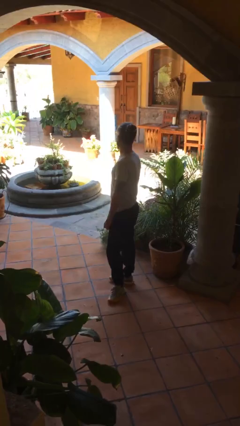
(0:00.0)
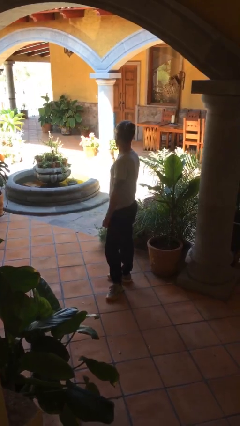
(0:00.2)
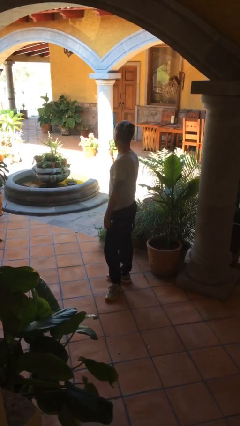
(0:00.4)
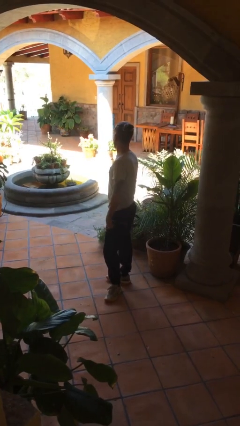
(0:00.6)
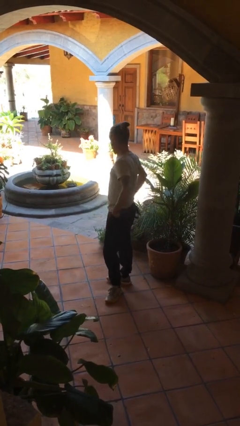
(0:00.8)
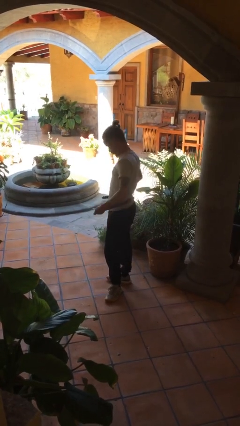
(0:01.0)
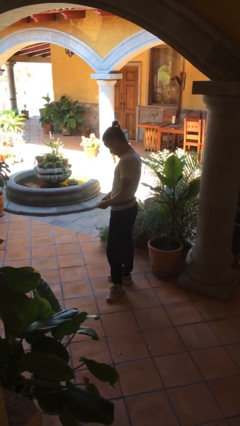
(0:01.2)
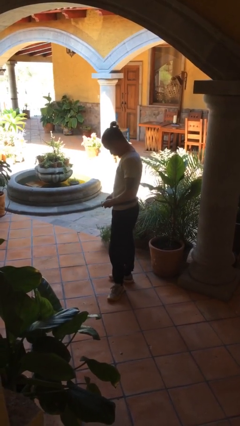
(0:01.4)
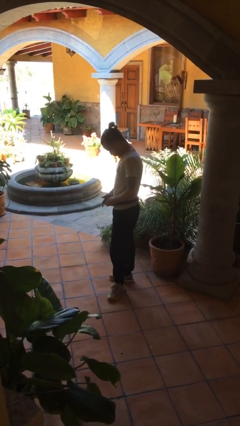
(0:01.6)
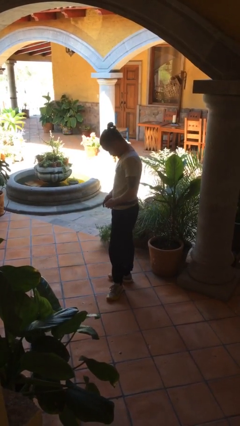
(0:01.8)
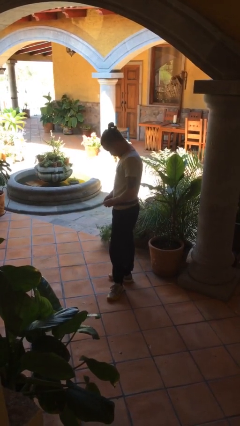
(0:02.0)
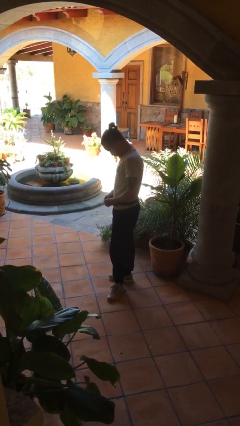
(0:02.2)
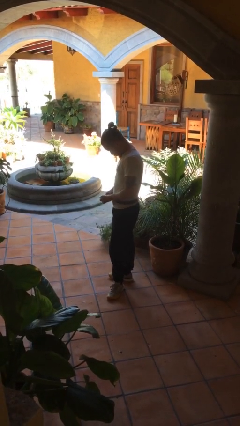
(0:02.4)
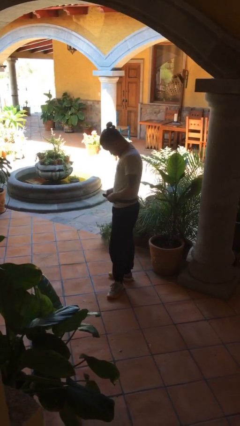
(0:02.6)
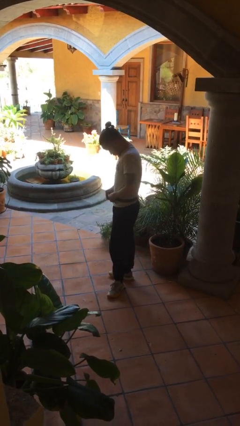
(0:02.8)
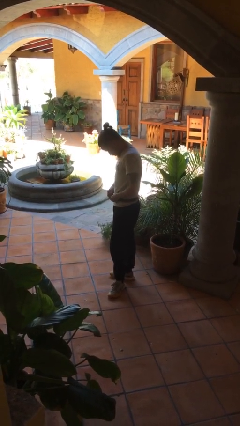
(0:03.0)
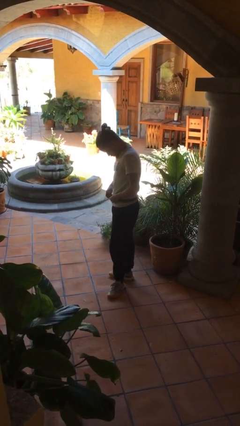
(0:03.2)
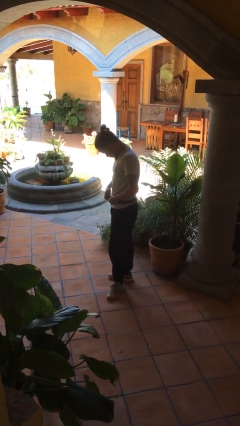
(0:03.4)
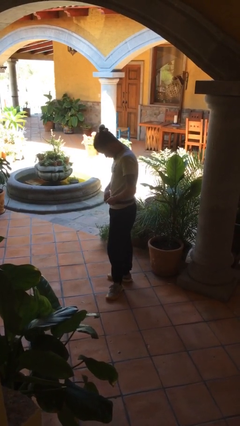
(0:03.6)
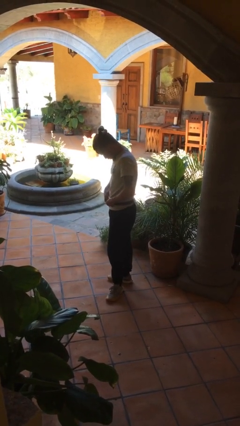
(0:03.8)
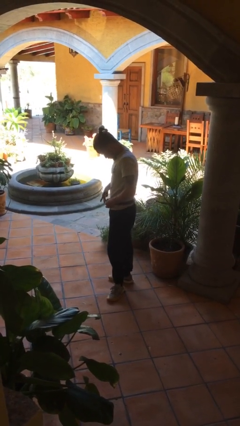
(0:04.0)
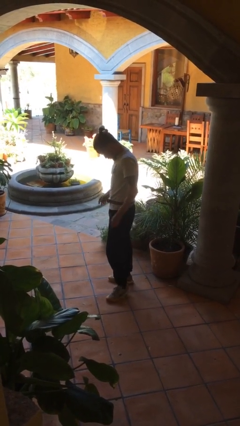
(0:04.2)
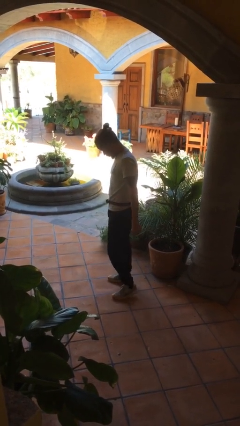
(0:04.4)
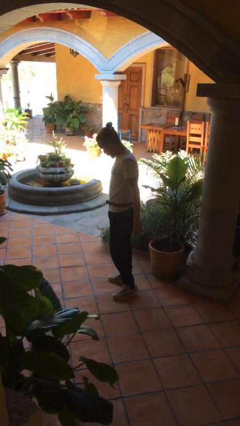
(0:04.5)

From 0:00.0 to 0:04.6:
person puts on belt

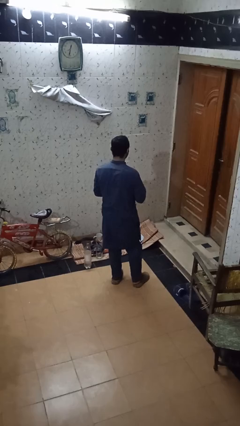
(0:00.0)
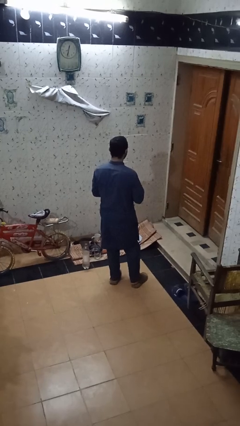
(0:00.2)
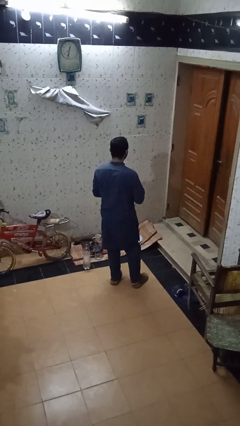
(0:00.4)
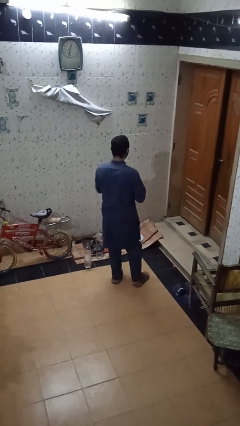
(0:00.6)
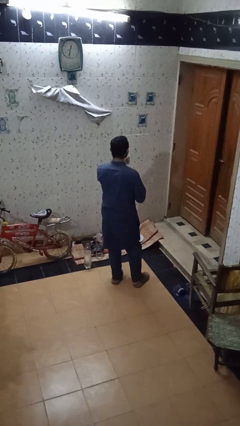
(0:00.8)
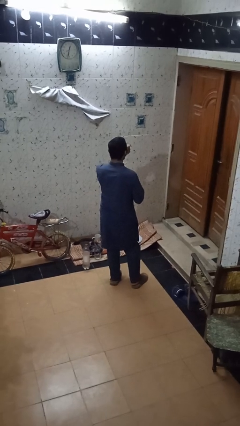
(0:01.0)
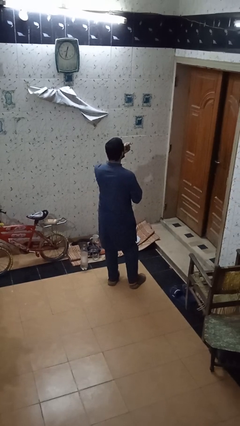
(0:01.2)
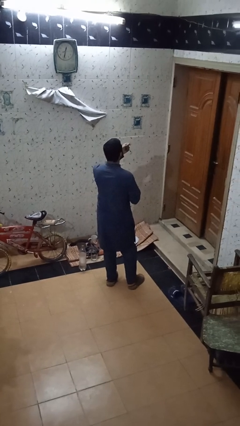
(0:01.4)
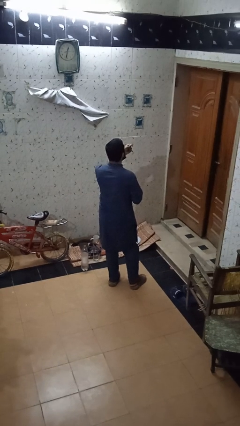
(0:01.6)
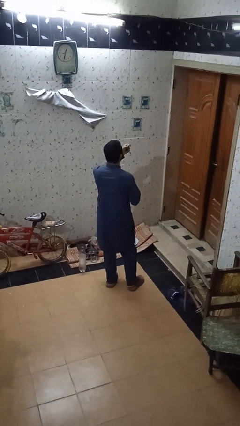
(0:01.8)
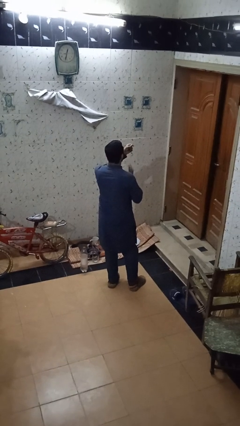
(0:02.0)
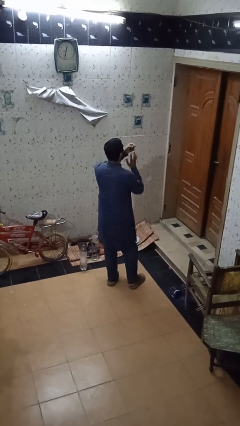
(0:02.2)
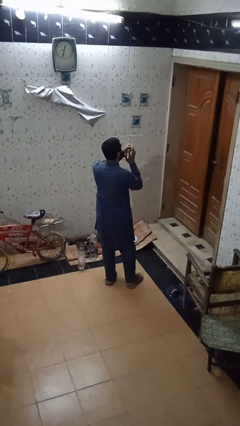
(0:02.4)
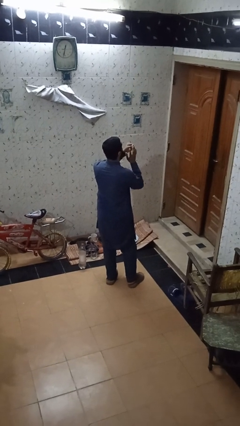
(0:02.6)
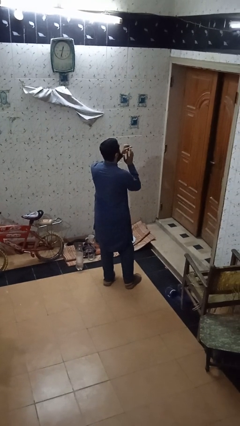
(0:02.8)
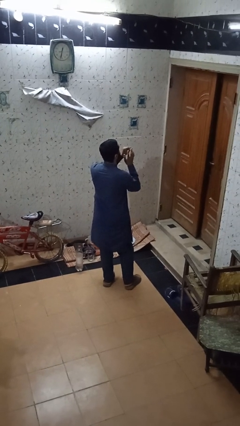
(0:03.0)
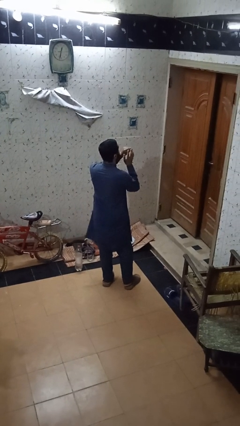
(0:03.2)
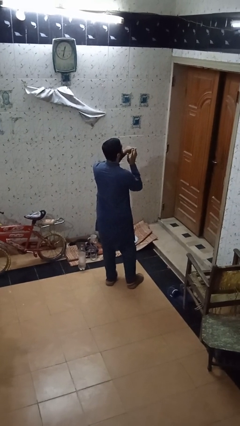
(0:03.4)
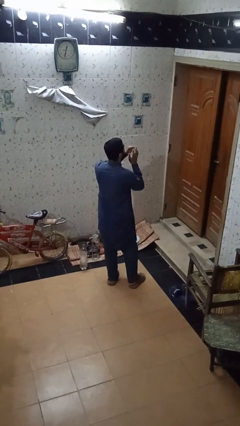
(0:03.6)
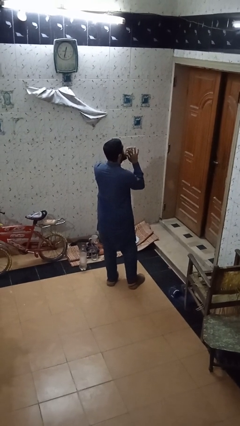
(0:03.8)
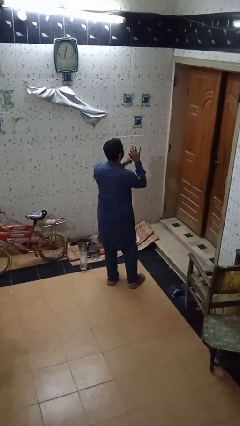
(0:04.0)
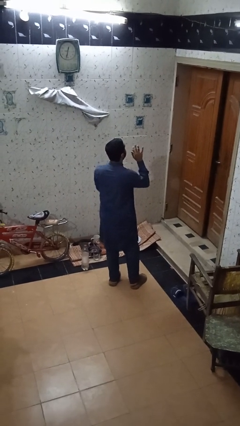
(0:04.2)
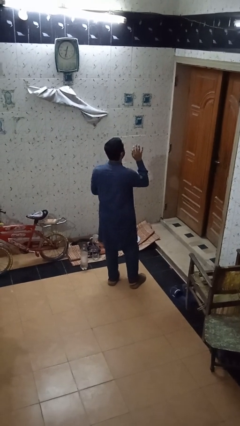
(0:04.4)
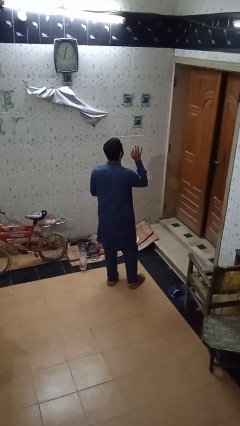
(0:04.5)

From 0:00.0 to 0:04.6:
person puts on ring

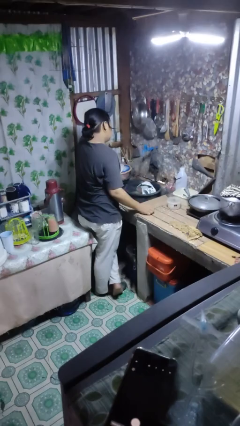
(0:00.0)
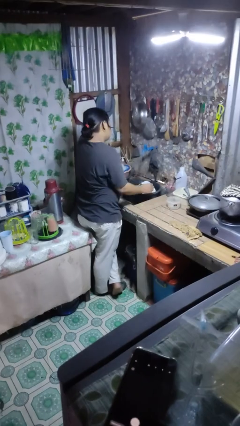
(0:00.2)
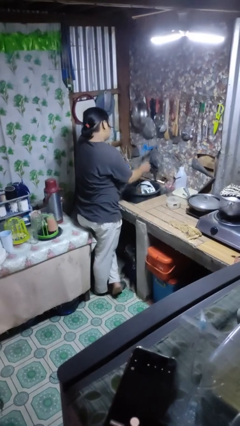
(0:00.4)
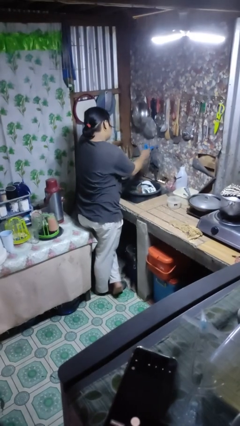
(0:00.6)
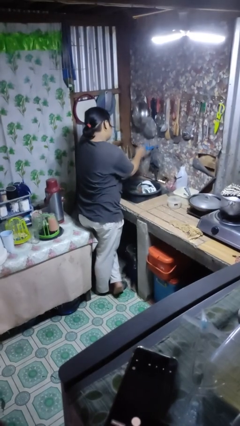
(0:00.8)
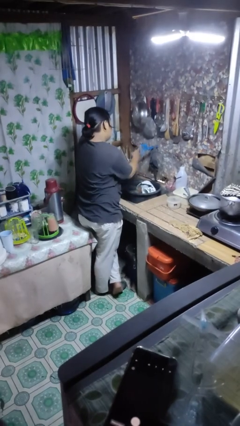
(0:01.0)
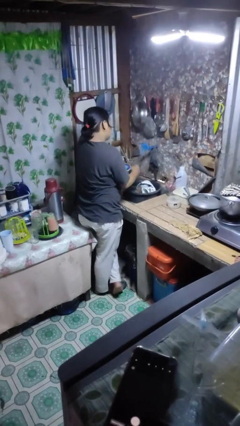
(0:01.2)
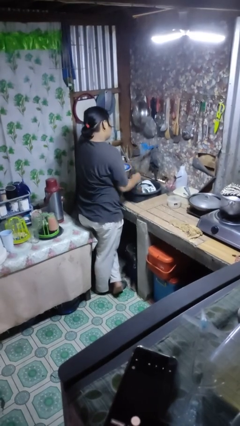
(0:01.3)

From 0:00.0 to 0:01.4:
person turns off faucet

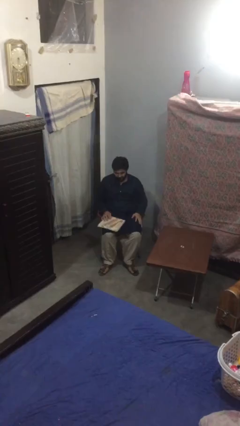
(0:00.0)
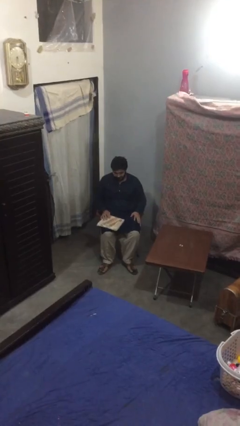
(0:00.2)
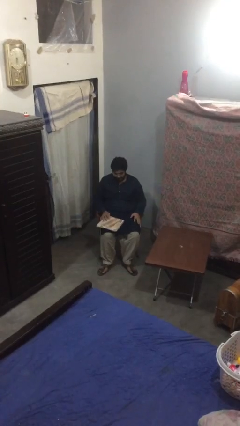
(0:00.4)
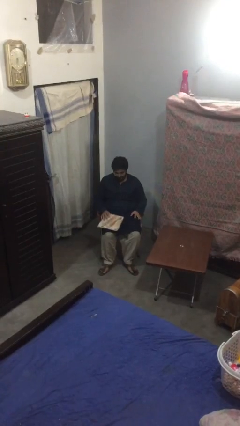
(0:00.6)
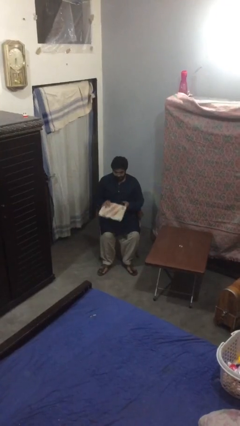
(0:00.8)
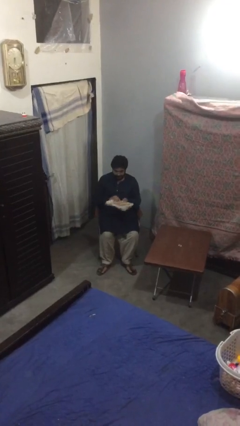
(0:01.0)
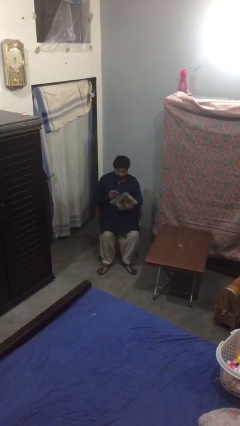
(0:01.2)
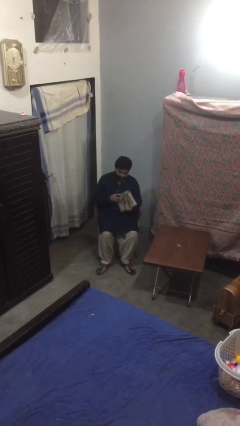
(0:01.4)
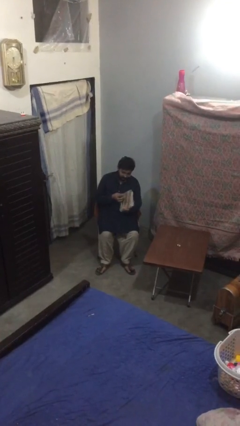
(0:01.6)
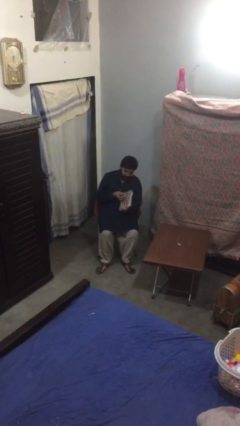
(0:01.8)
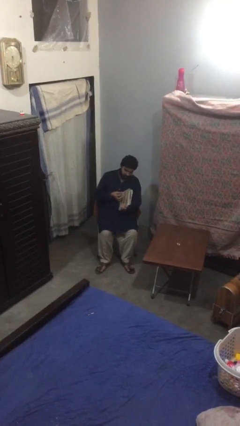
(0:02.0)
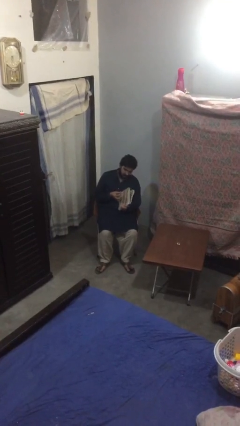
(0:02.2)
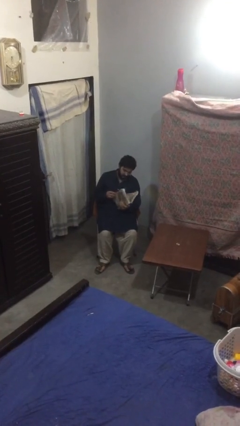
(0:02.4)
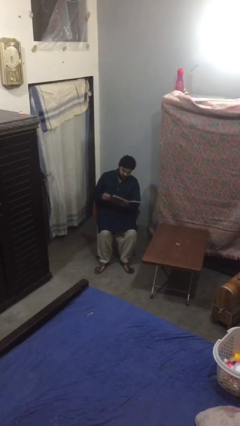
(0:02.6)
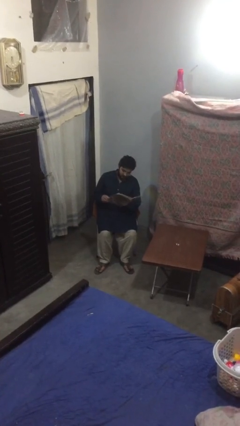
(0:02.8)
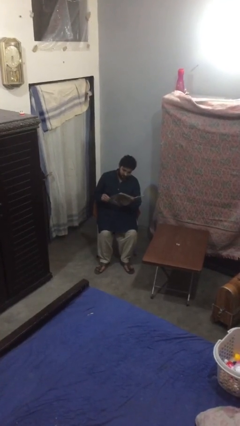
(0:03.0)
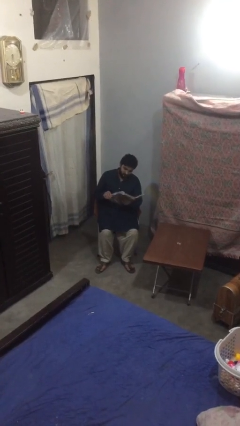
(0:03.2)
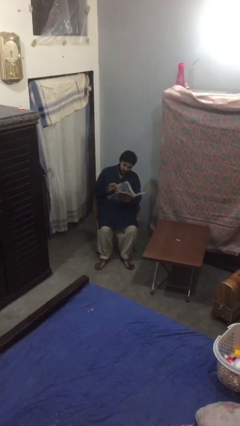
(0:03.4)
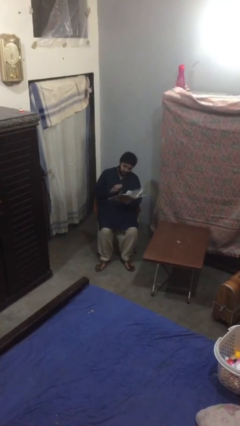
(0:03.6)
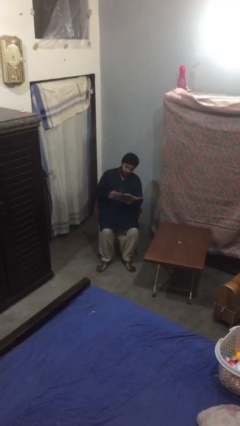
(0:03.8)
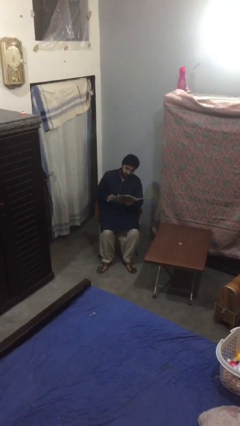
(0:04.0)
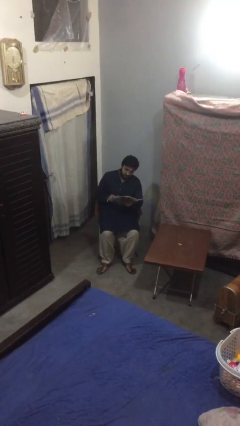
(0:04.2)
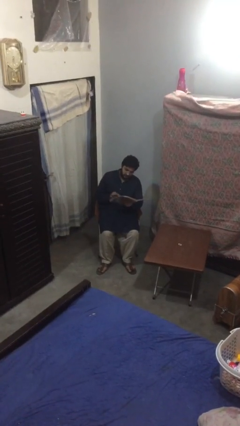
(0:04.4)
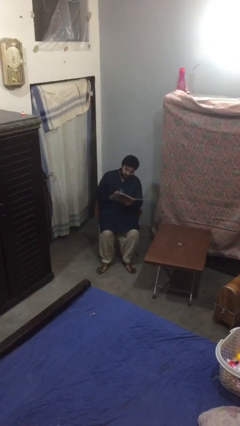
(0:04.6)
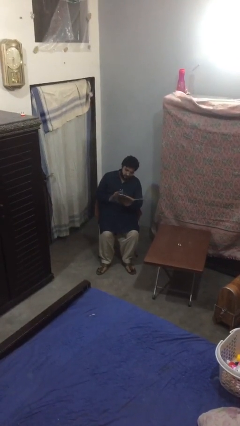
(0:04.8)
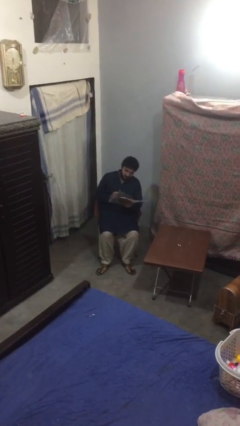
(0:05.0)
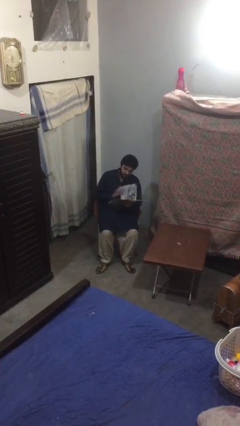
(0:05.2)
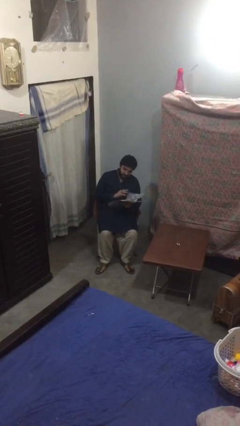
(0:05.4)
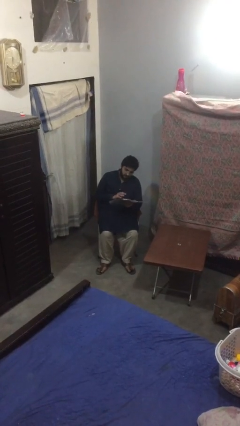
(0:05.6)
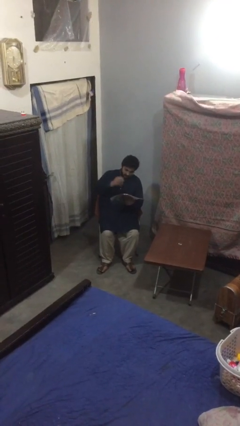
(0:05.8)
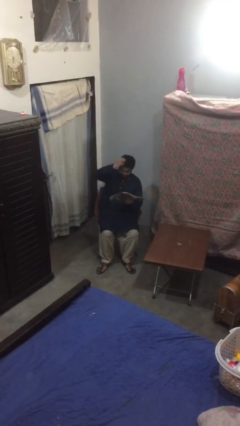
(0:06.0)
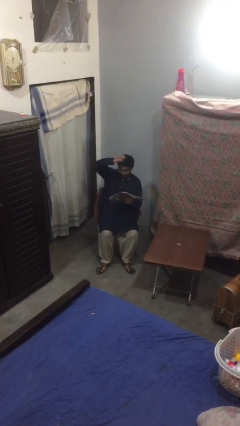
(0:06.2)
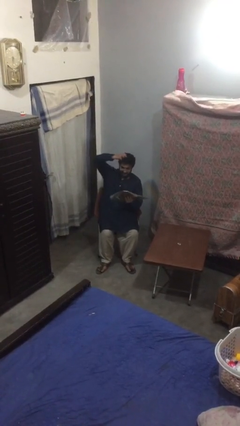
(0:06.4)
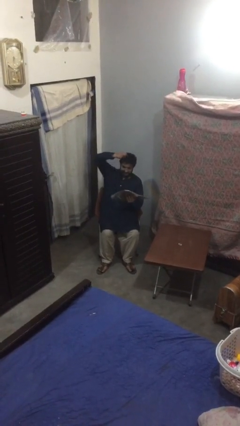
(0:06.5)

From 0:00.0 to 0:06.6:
person reads document

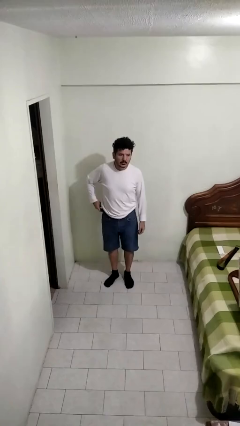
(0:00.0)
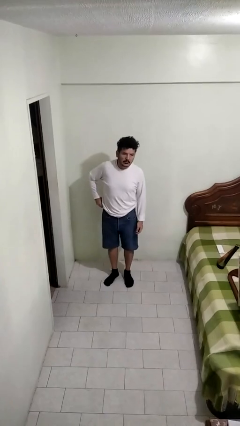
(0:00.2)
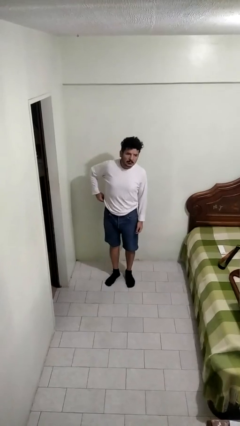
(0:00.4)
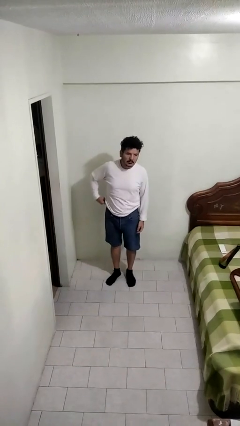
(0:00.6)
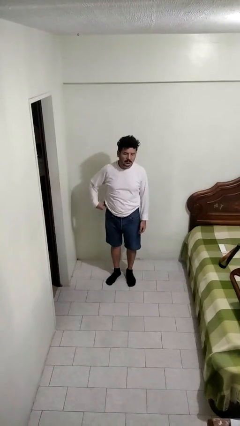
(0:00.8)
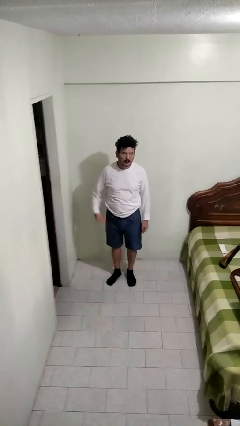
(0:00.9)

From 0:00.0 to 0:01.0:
person hikes up pants
